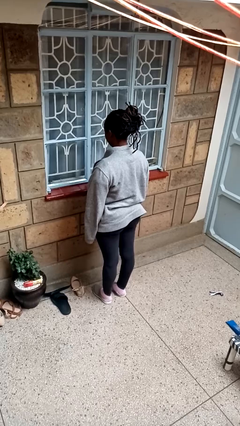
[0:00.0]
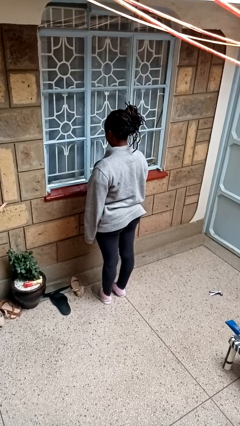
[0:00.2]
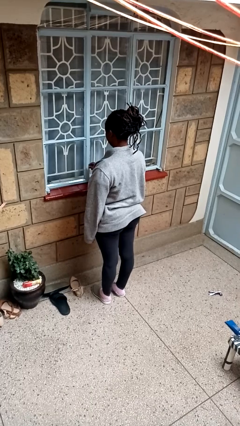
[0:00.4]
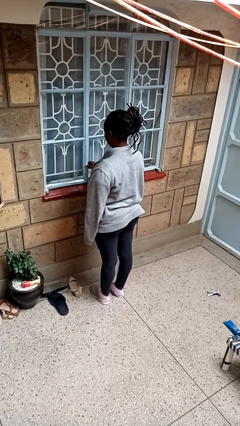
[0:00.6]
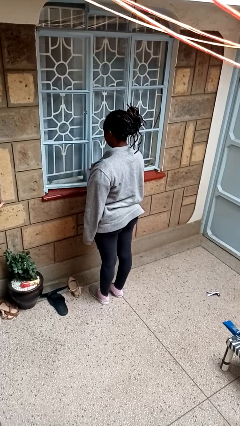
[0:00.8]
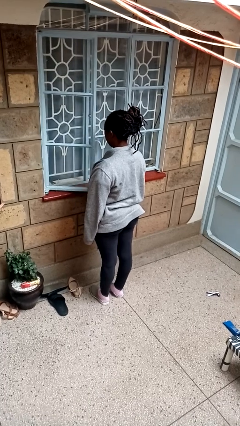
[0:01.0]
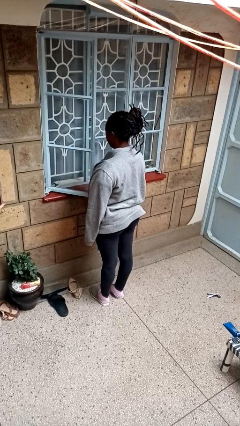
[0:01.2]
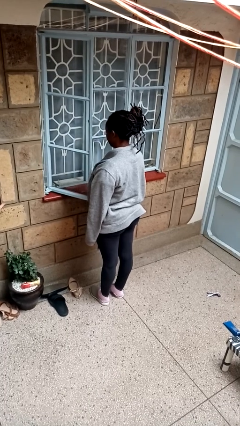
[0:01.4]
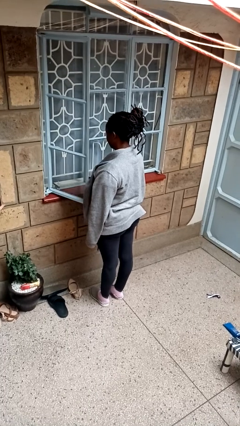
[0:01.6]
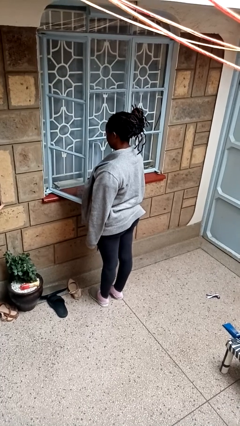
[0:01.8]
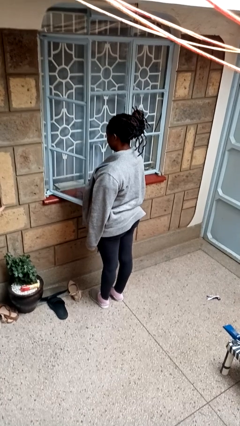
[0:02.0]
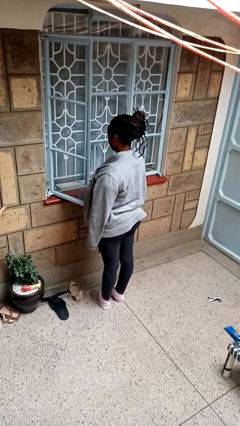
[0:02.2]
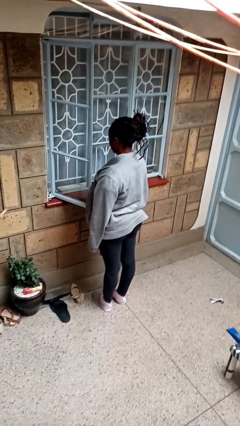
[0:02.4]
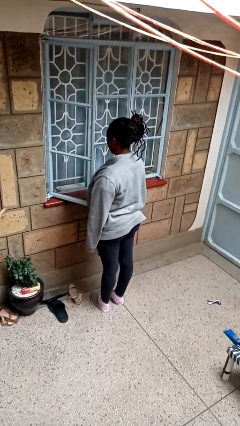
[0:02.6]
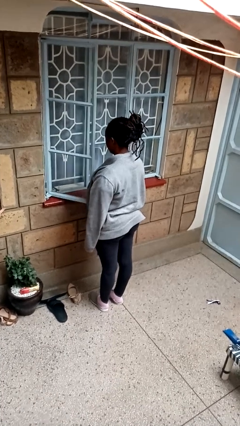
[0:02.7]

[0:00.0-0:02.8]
person opens home window

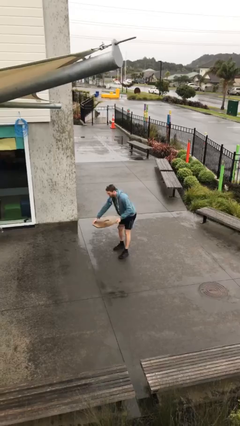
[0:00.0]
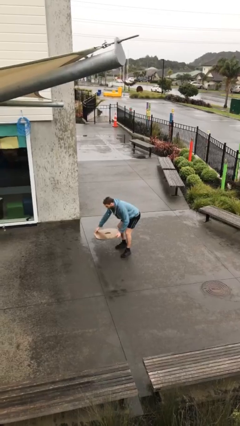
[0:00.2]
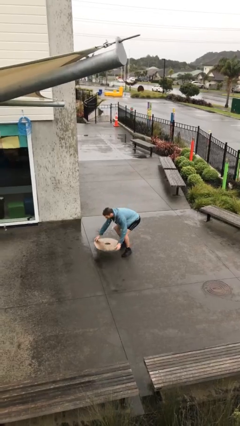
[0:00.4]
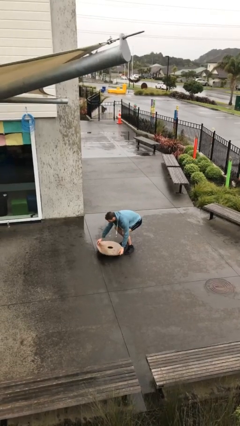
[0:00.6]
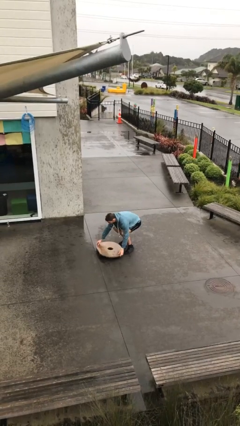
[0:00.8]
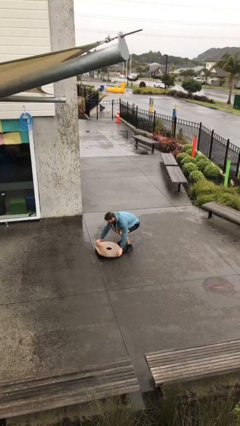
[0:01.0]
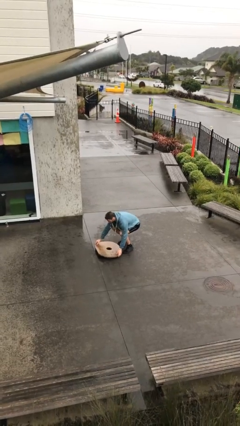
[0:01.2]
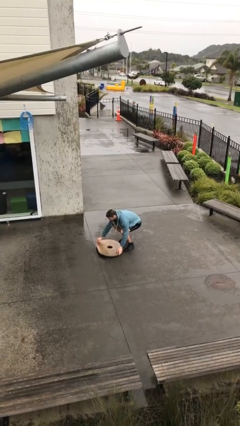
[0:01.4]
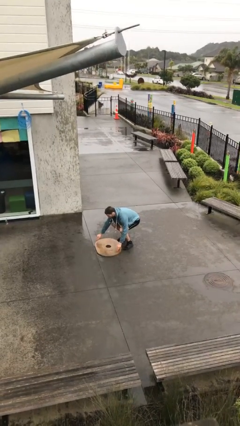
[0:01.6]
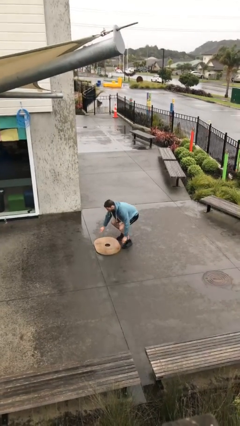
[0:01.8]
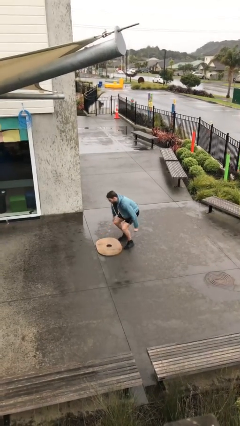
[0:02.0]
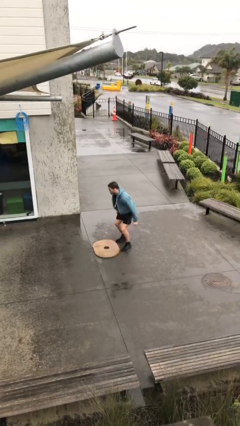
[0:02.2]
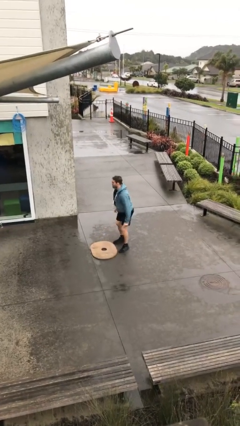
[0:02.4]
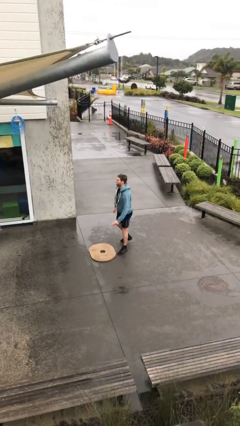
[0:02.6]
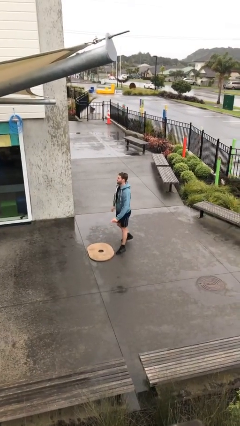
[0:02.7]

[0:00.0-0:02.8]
person puts down object on floor

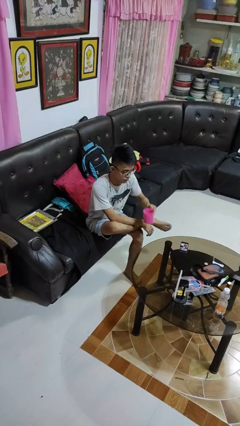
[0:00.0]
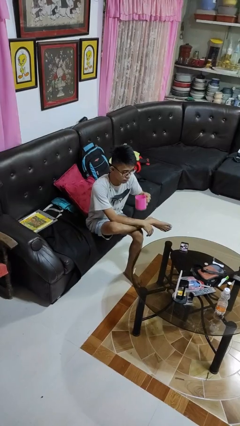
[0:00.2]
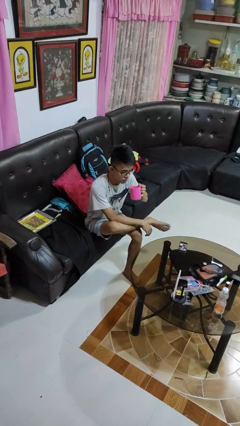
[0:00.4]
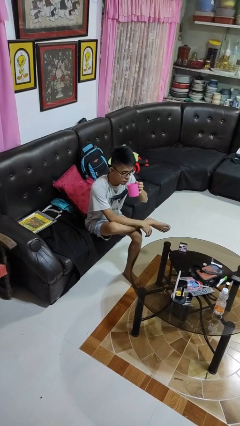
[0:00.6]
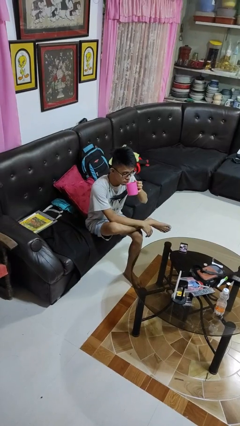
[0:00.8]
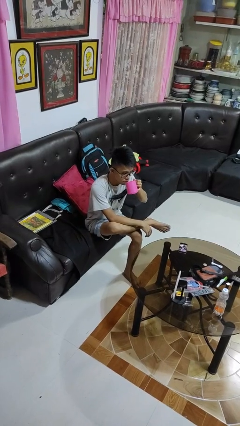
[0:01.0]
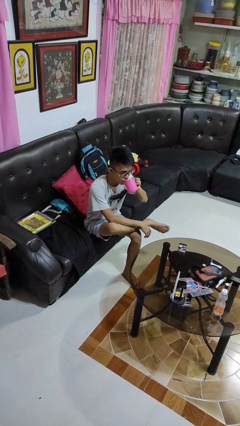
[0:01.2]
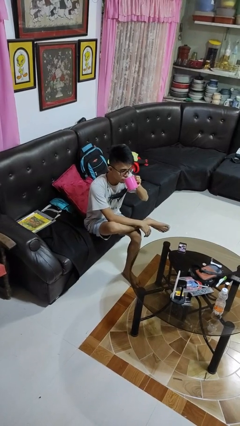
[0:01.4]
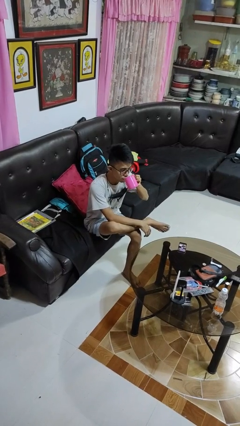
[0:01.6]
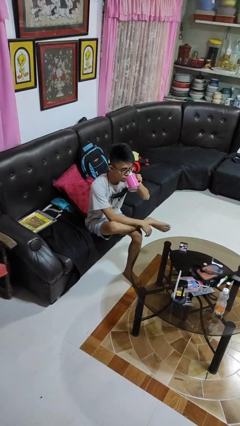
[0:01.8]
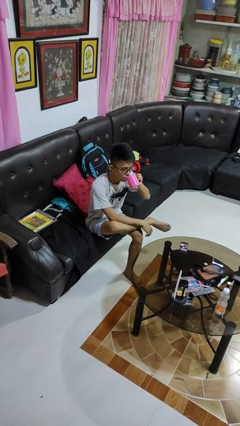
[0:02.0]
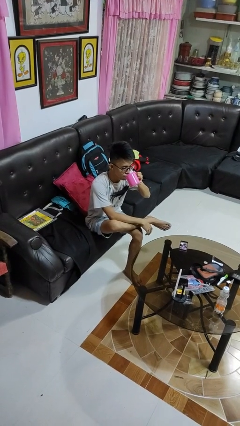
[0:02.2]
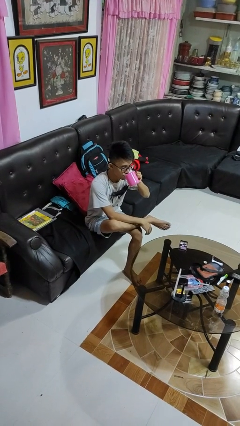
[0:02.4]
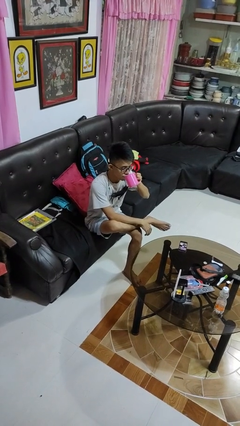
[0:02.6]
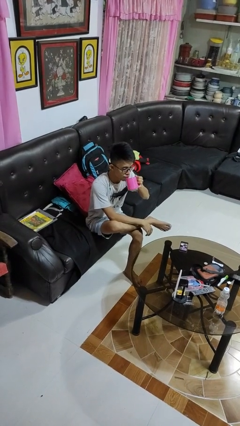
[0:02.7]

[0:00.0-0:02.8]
person drinks from mug

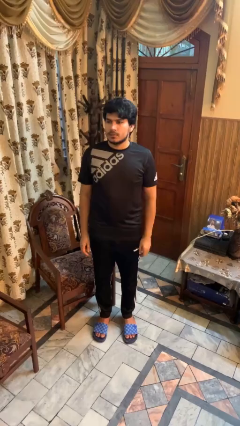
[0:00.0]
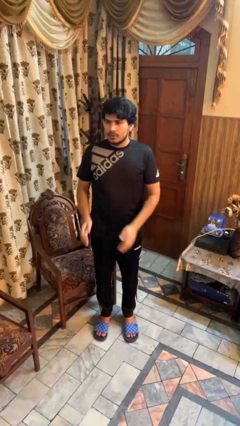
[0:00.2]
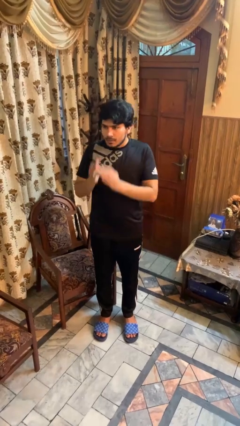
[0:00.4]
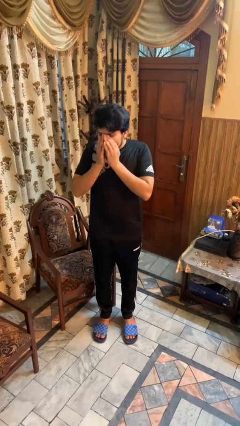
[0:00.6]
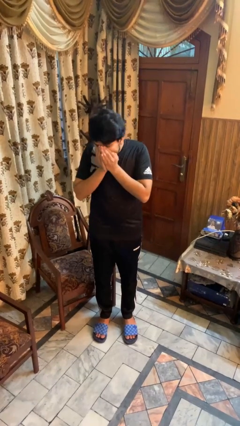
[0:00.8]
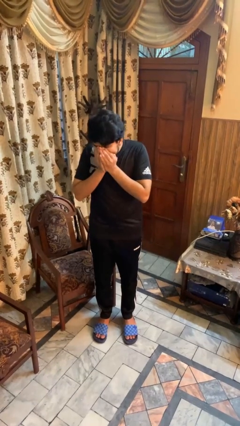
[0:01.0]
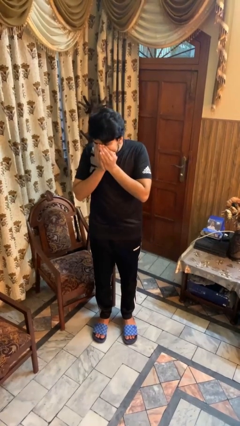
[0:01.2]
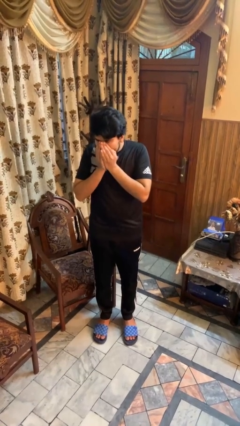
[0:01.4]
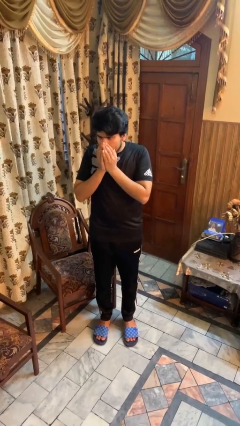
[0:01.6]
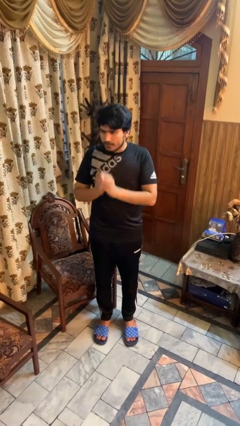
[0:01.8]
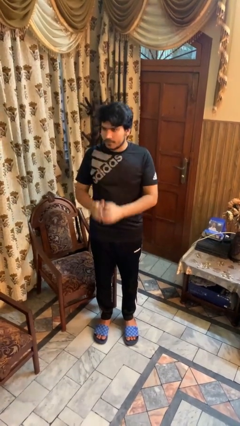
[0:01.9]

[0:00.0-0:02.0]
person sneezes into hand

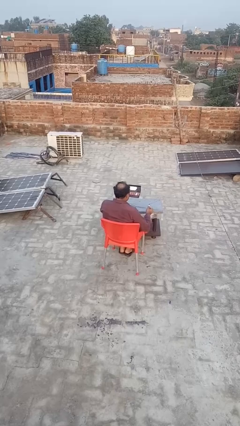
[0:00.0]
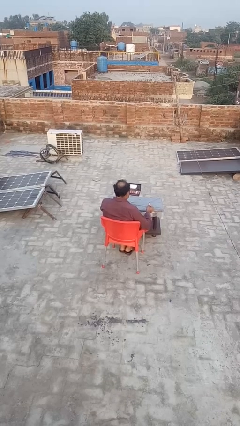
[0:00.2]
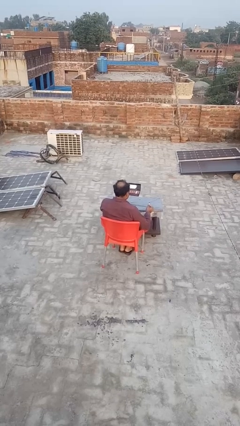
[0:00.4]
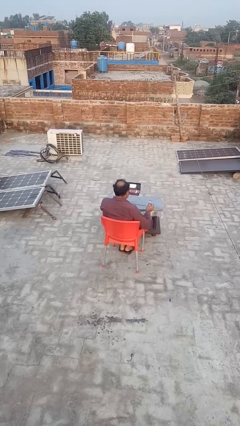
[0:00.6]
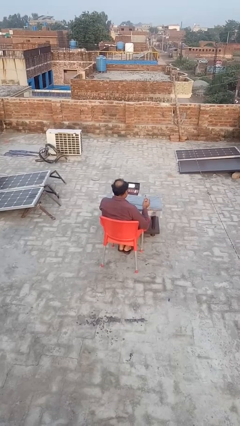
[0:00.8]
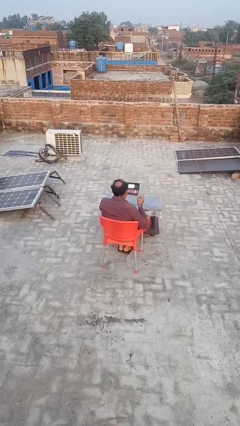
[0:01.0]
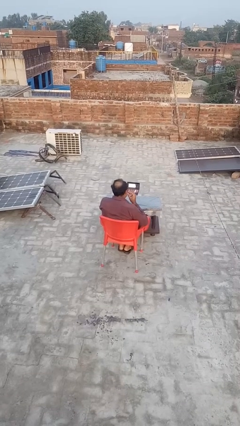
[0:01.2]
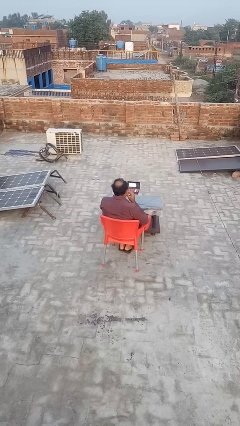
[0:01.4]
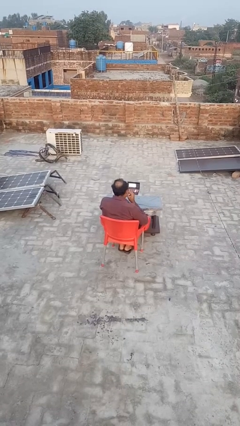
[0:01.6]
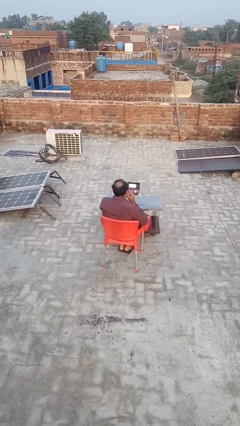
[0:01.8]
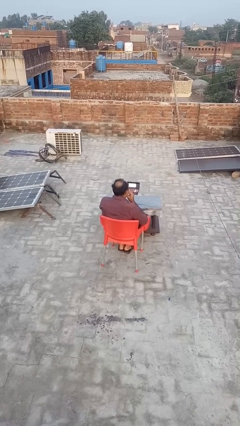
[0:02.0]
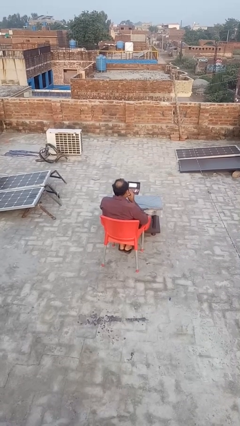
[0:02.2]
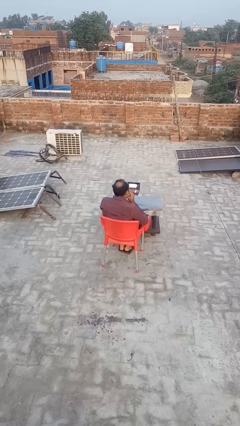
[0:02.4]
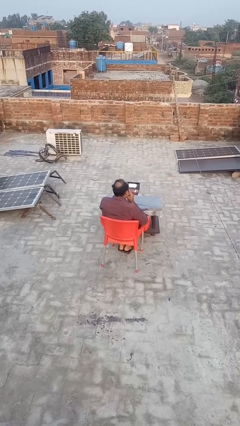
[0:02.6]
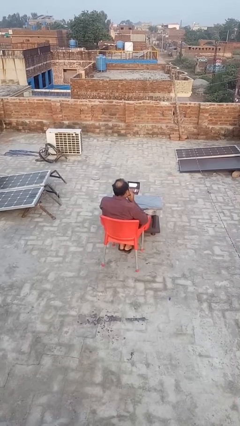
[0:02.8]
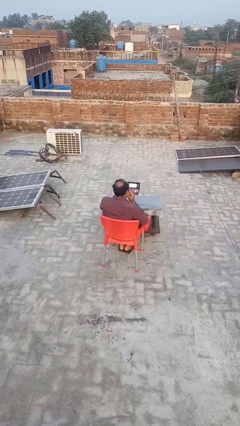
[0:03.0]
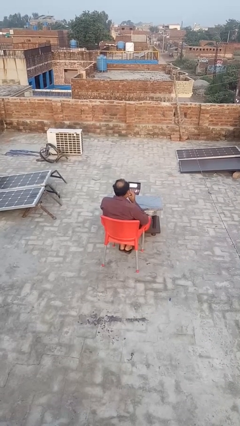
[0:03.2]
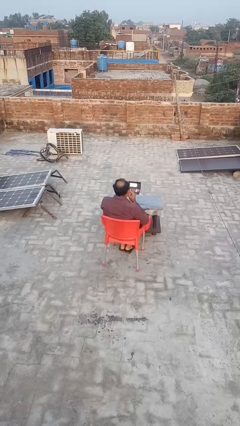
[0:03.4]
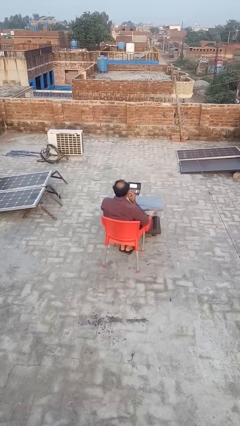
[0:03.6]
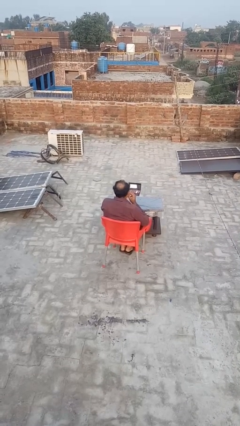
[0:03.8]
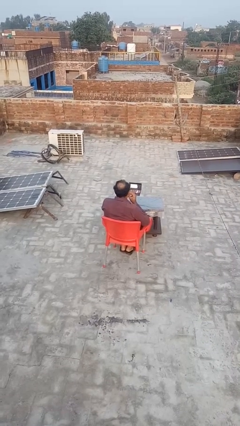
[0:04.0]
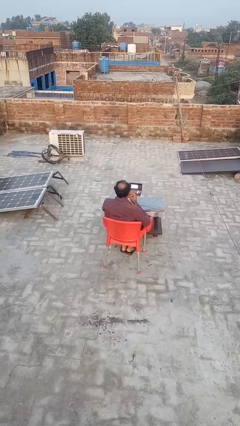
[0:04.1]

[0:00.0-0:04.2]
person applies lip makeup

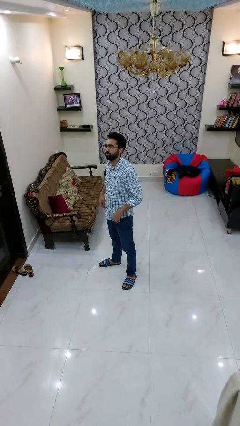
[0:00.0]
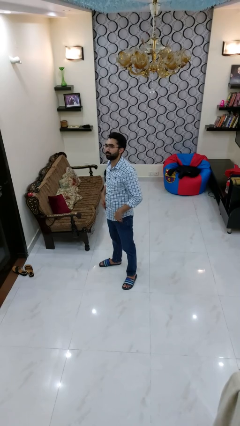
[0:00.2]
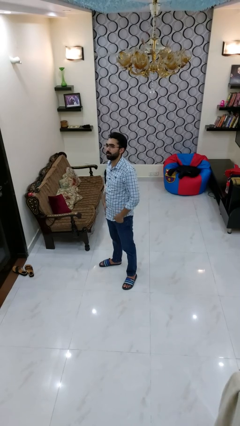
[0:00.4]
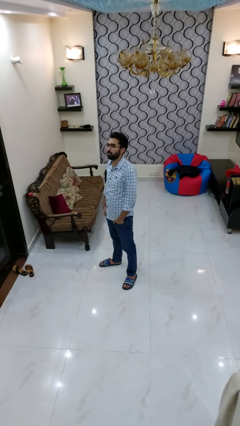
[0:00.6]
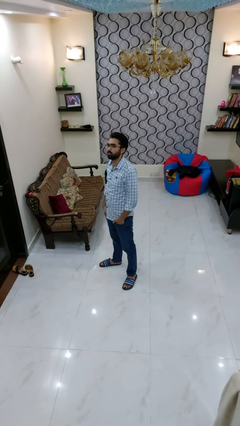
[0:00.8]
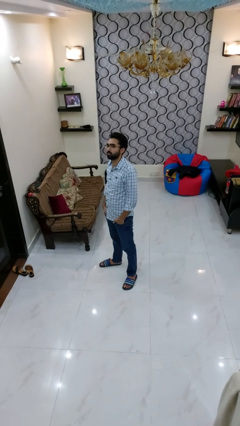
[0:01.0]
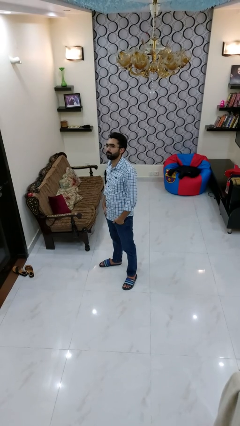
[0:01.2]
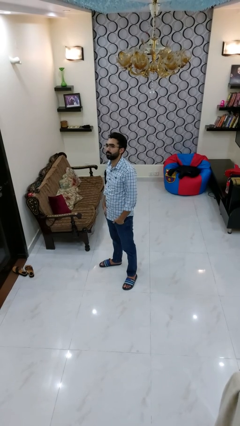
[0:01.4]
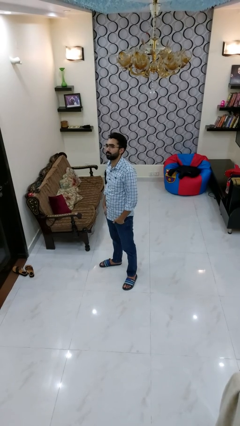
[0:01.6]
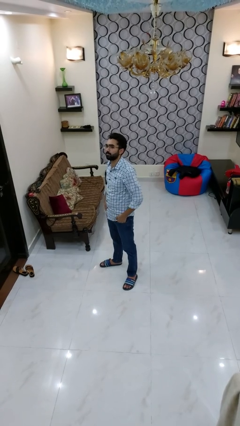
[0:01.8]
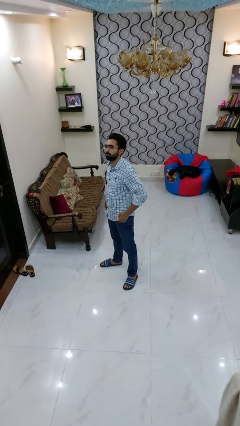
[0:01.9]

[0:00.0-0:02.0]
person puts hands in back pockets
